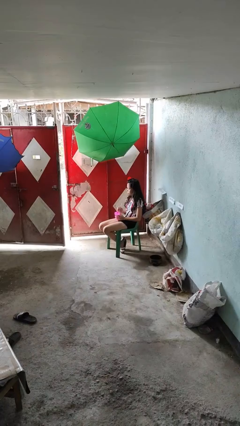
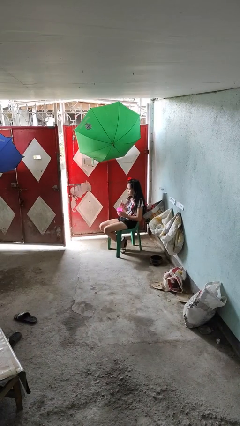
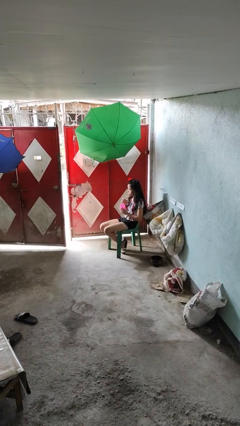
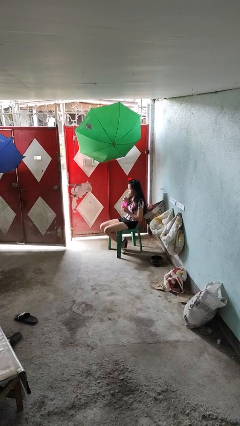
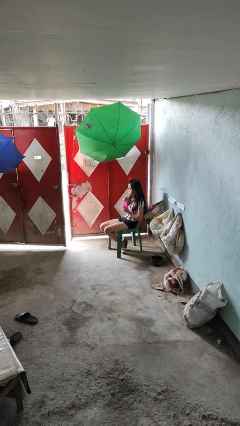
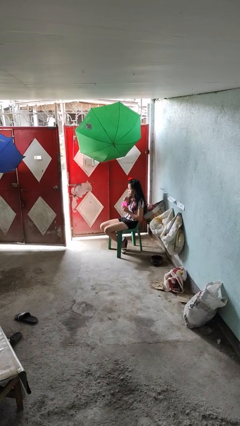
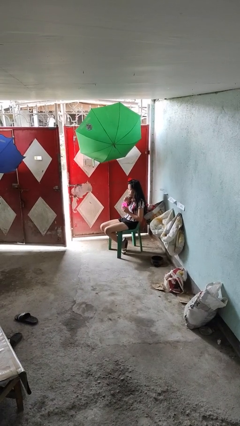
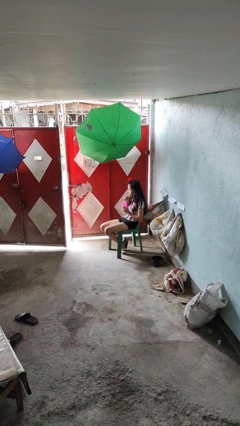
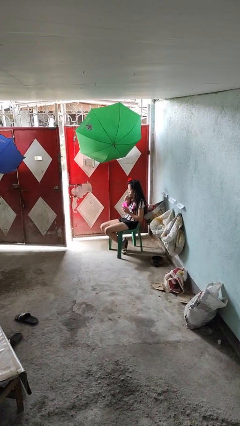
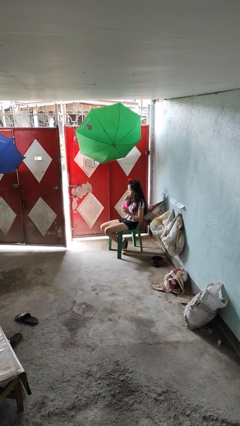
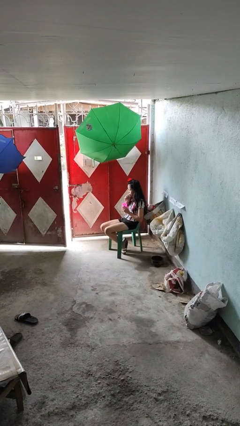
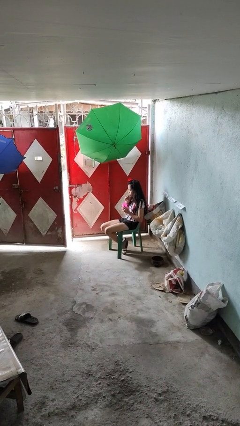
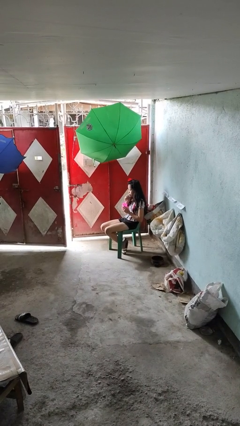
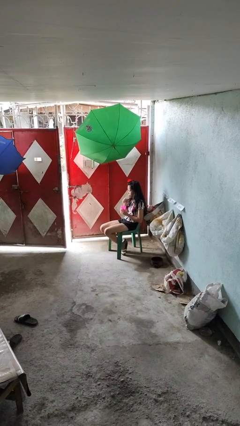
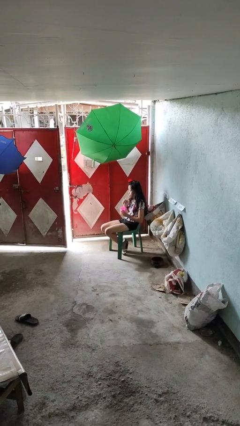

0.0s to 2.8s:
person drinks from straw

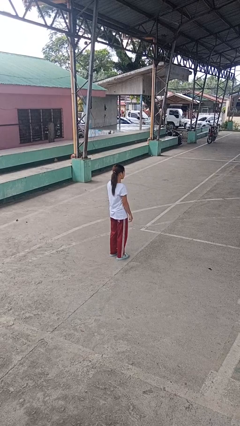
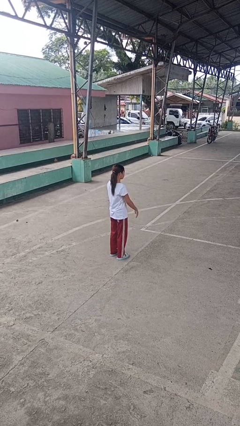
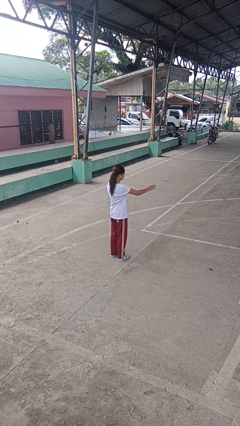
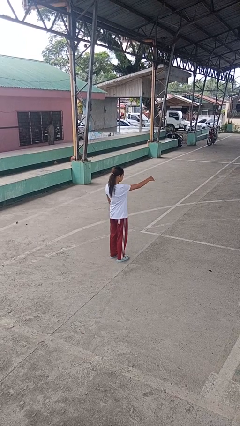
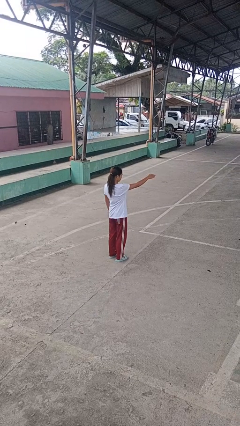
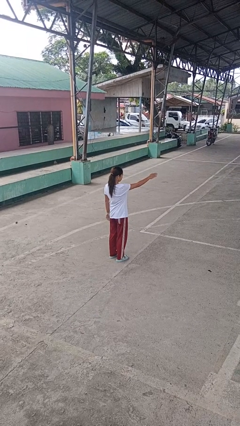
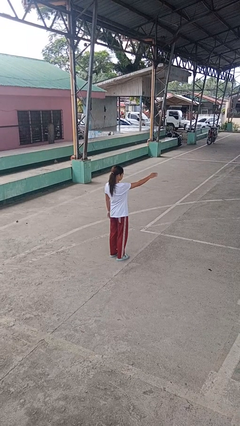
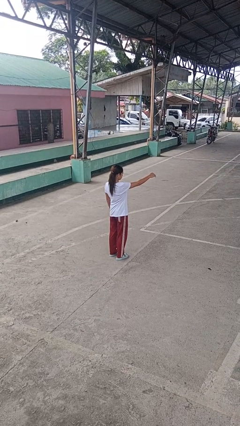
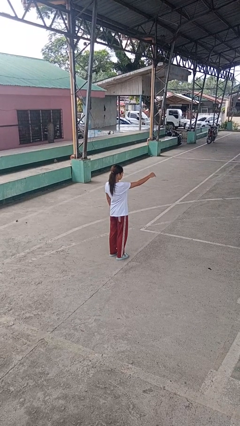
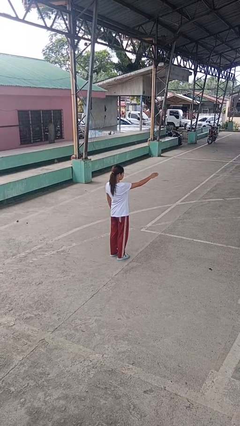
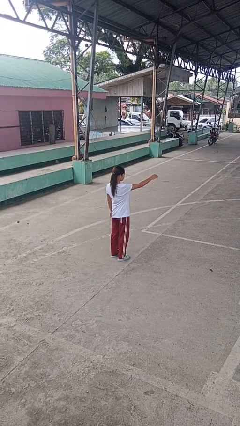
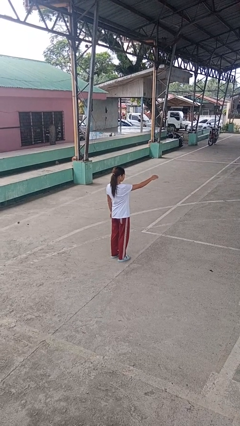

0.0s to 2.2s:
person gestures come here

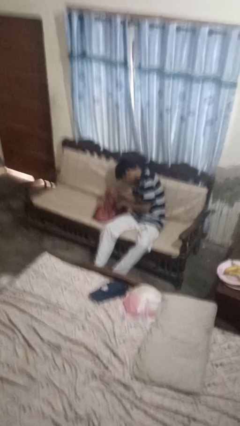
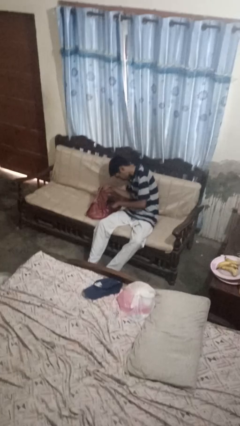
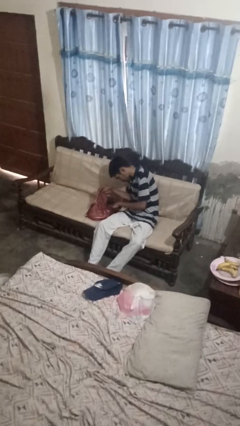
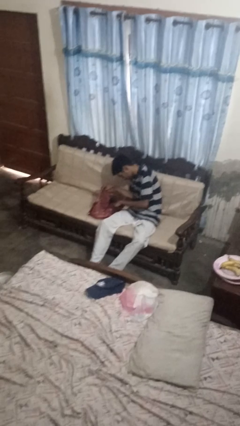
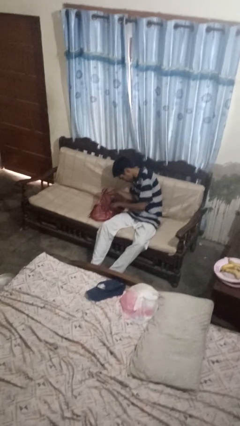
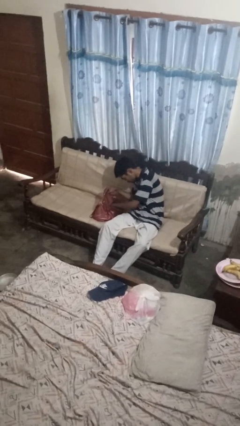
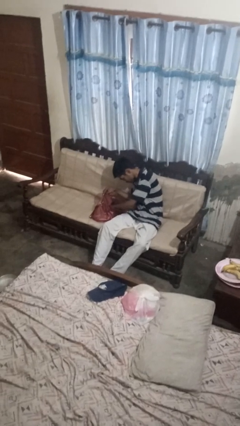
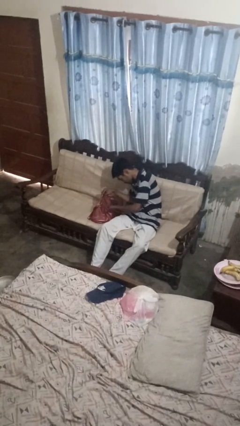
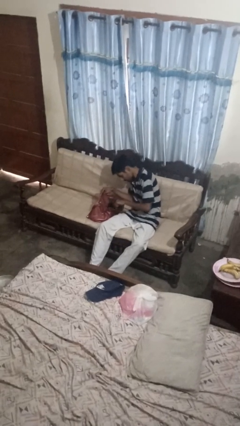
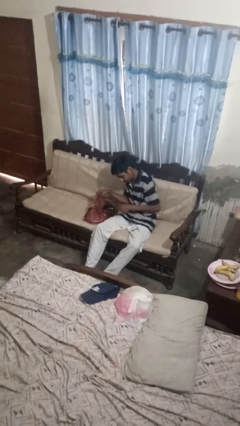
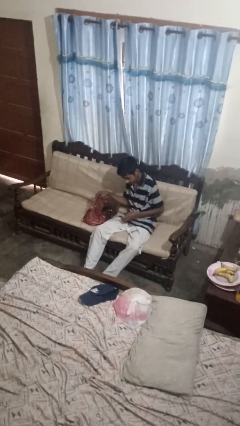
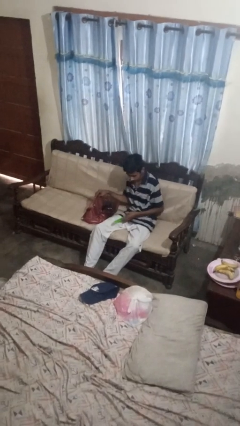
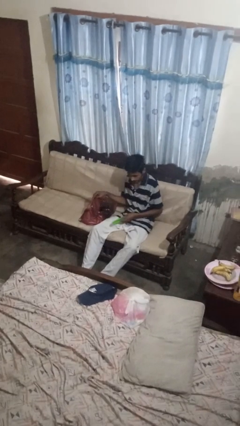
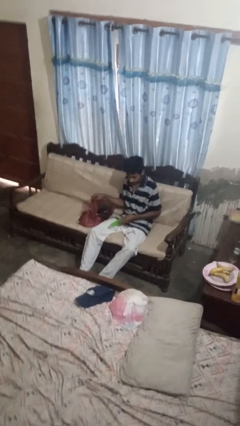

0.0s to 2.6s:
person takes object from purse

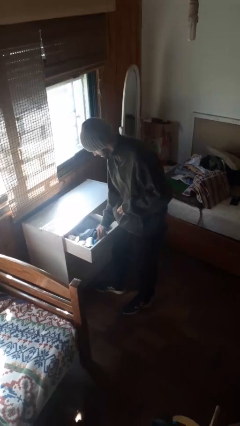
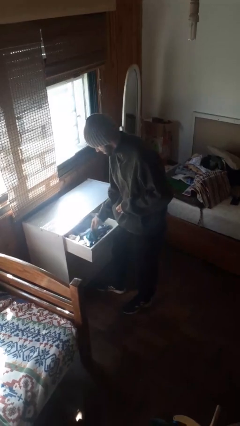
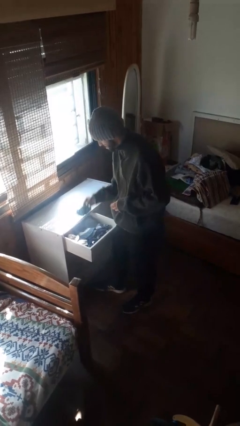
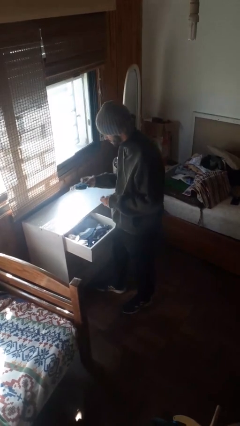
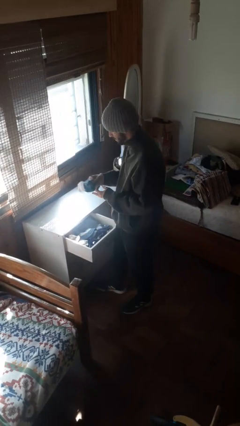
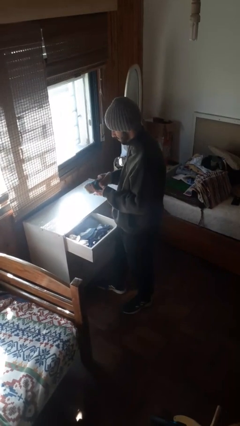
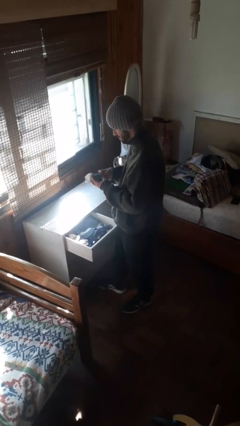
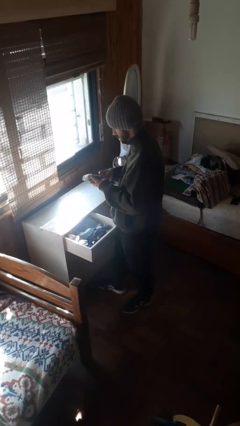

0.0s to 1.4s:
person takes clothes from dresser

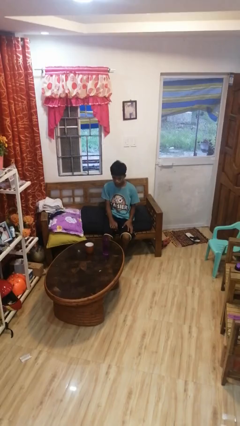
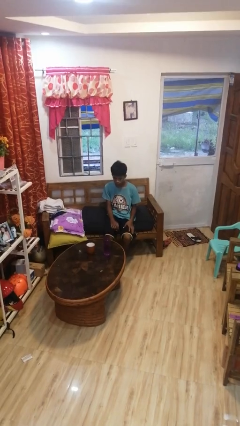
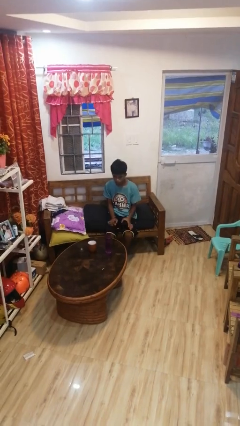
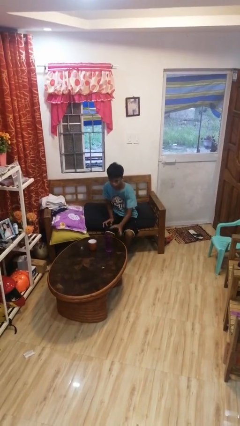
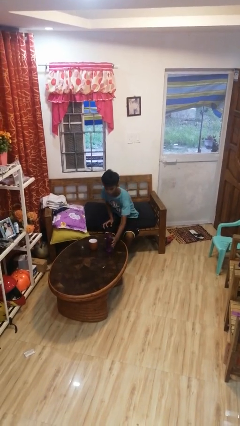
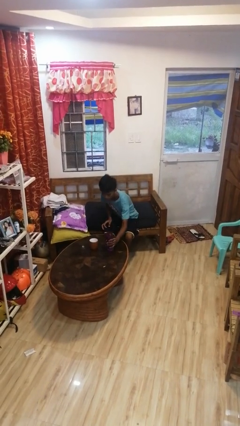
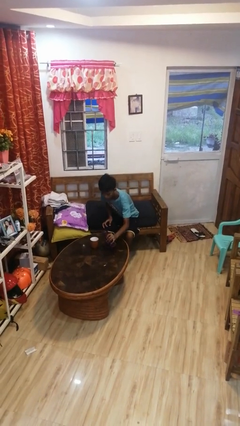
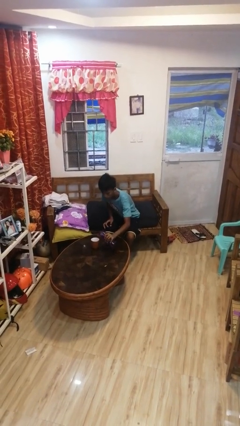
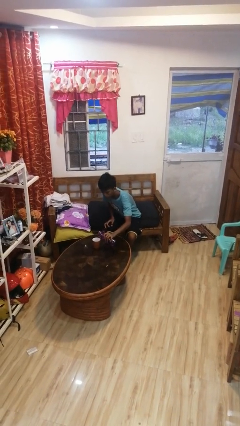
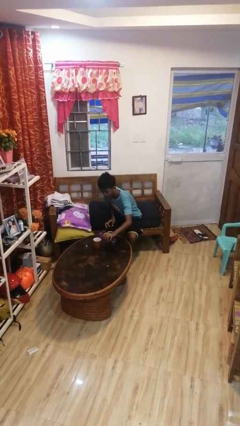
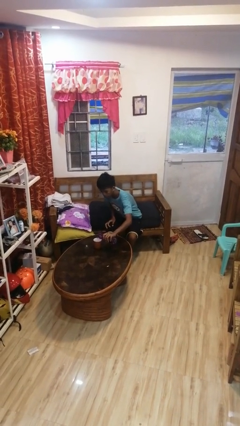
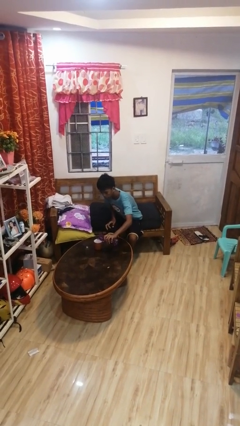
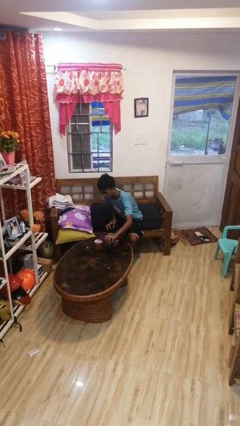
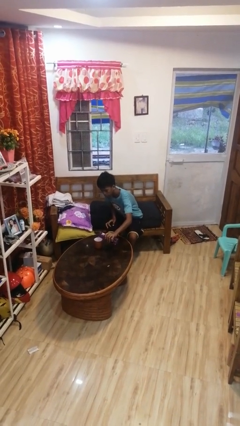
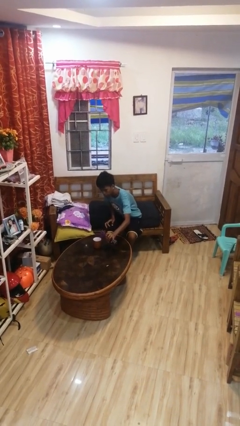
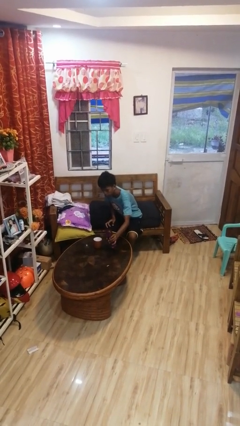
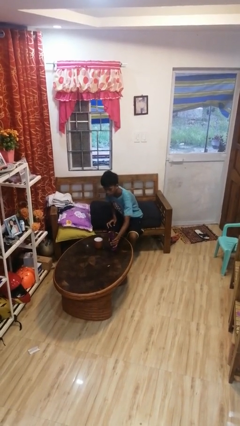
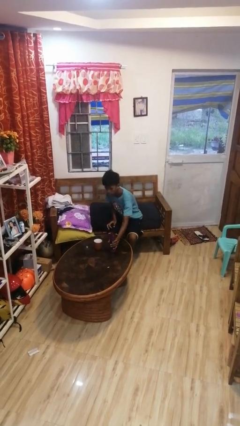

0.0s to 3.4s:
person pours liquid into cup

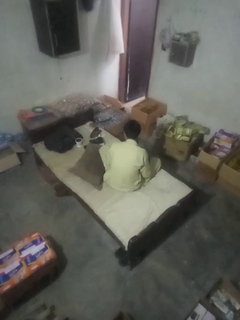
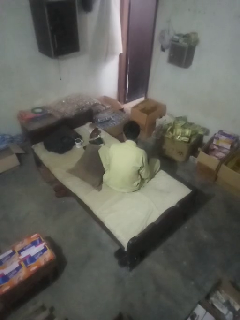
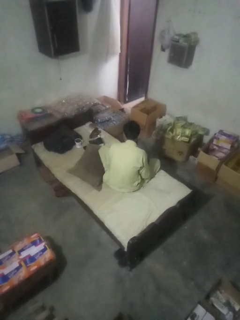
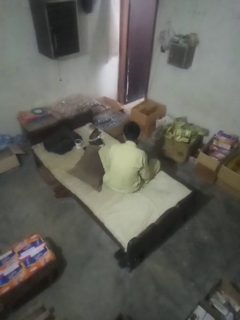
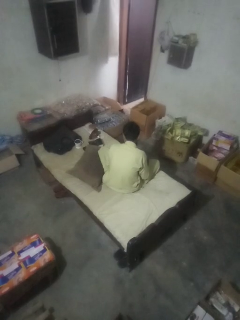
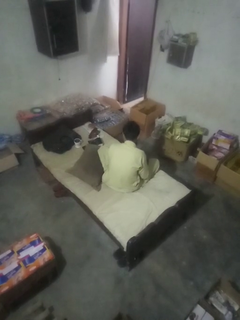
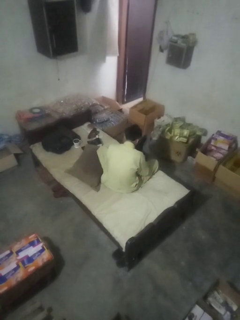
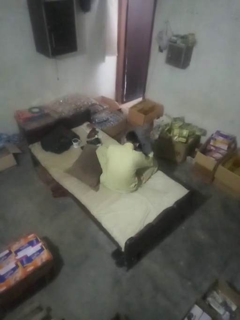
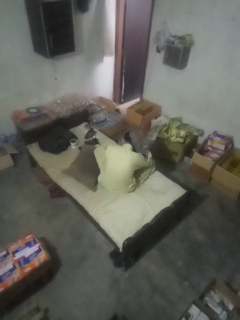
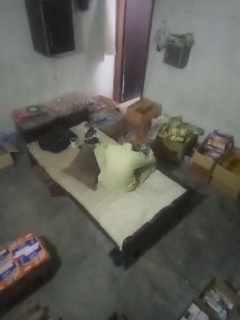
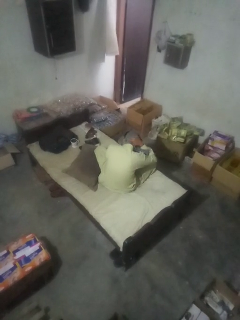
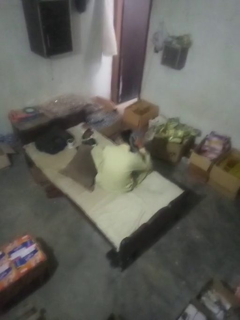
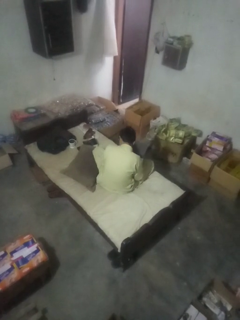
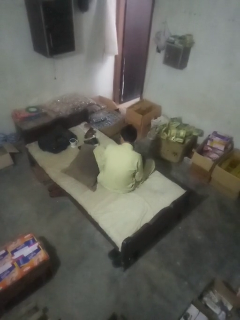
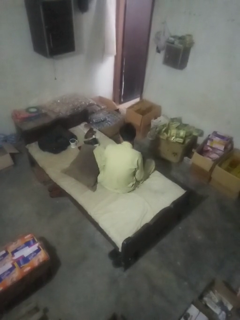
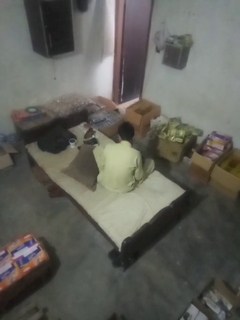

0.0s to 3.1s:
person dries hair with hairdryer

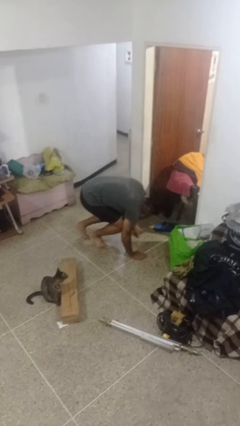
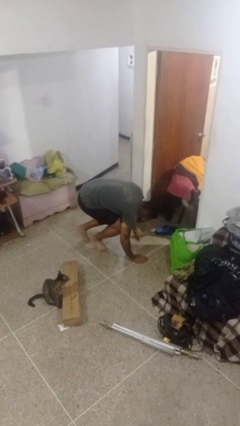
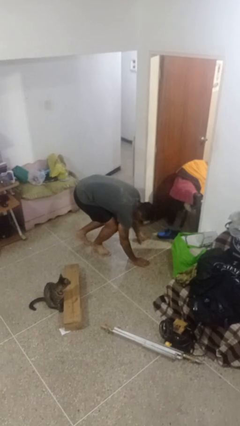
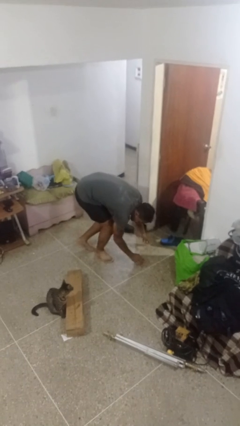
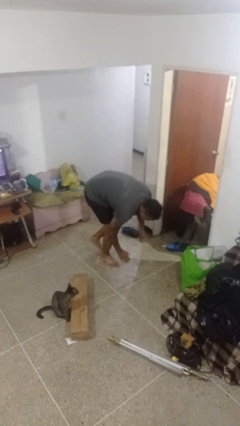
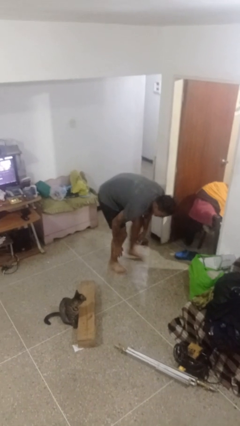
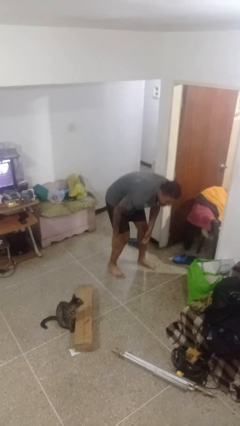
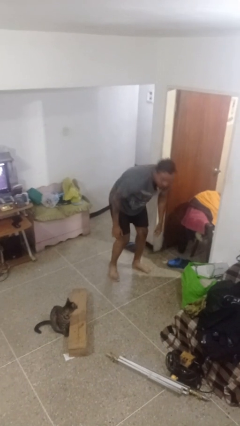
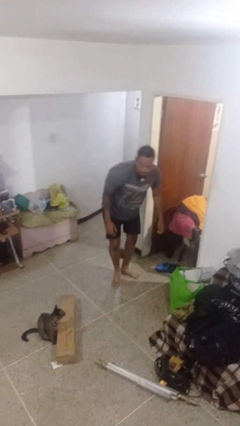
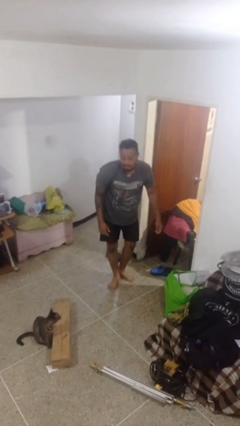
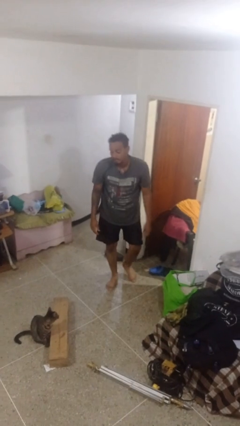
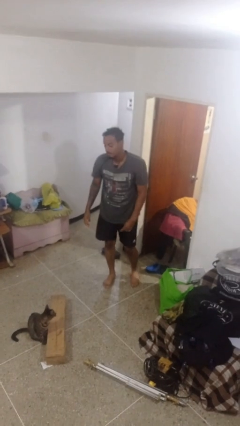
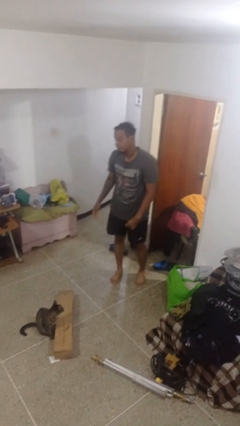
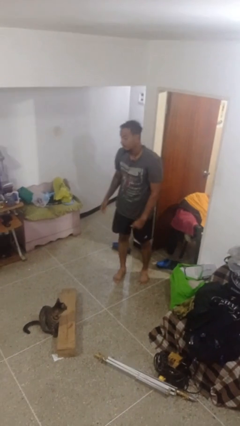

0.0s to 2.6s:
person stands up from floor
